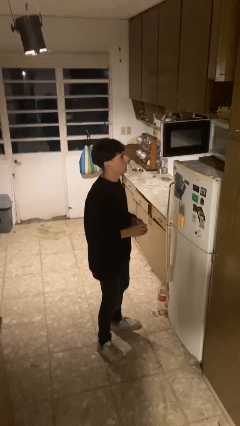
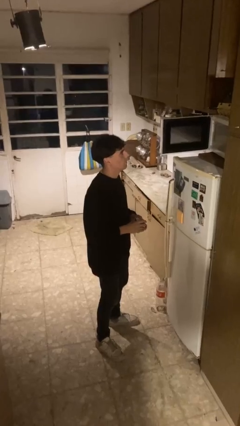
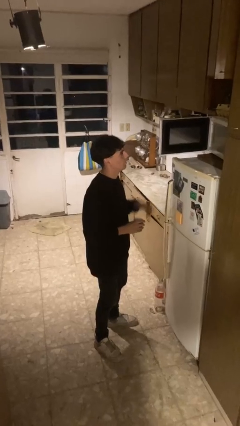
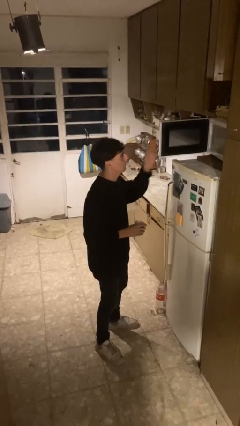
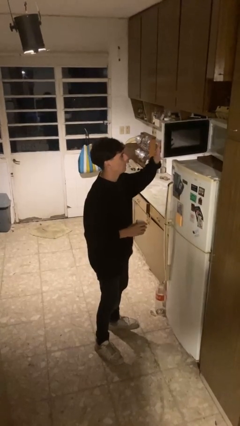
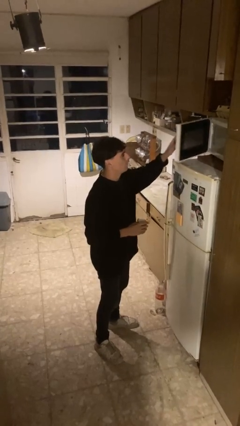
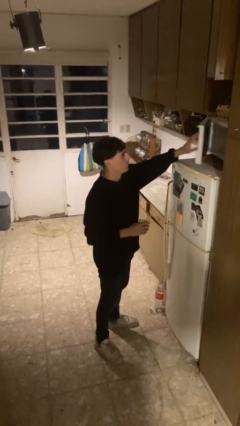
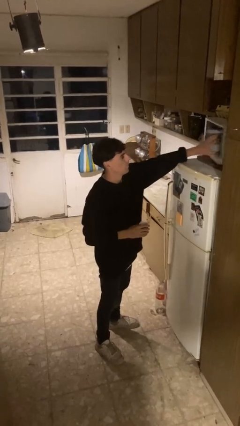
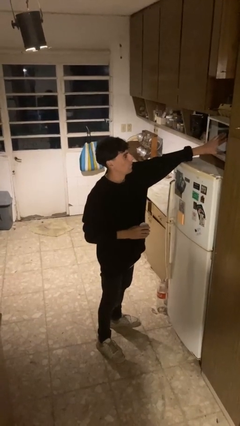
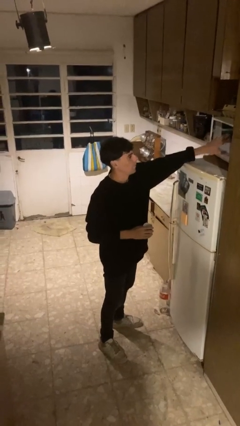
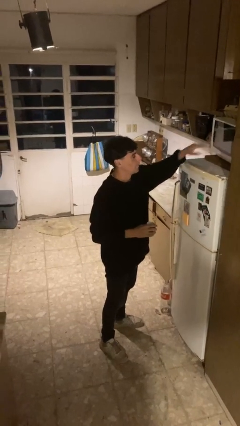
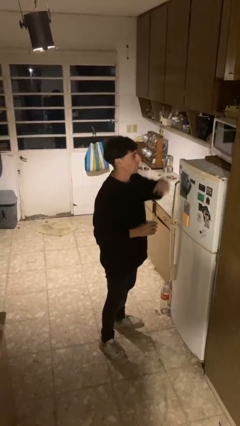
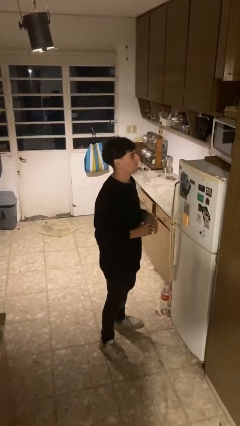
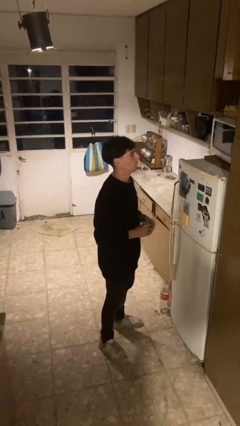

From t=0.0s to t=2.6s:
person closes microwave

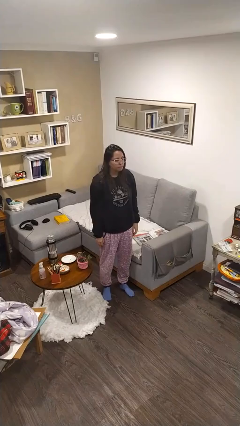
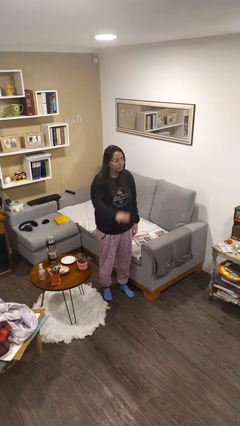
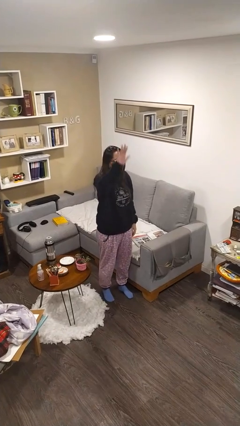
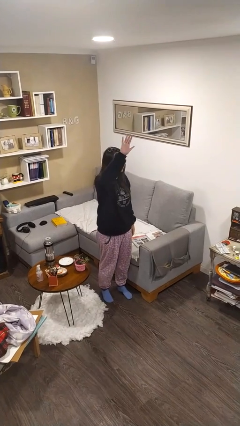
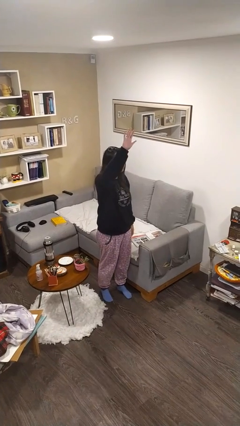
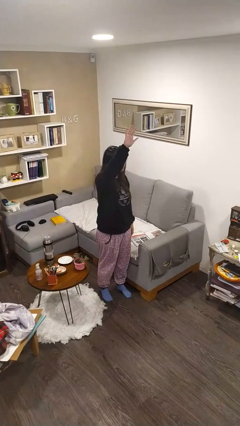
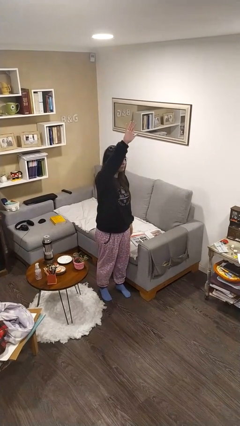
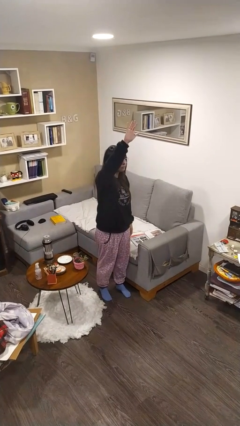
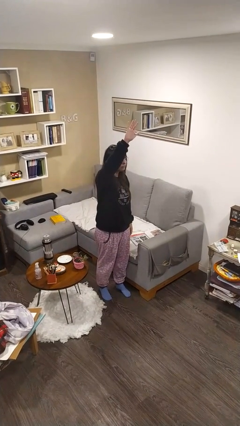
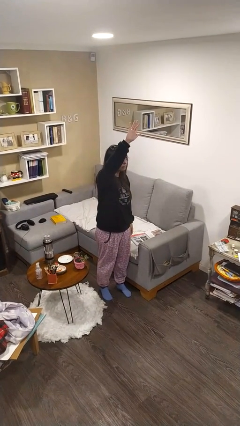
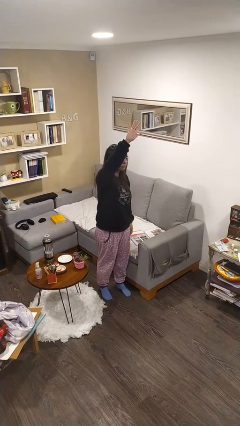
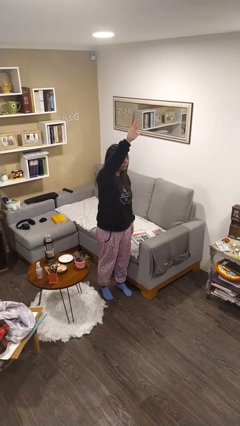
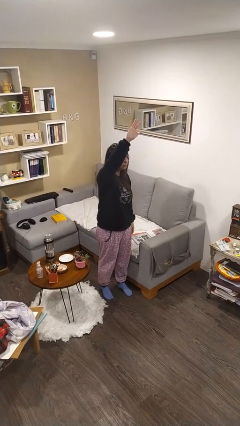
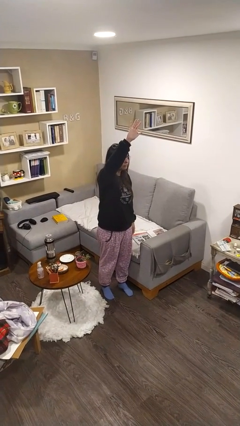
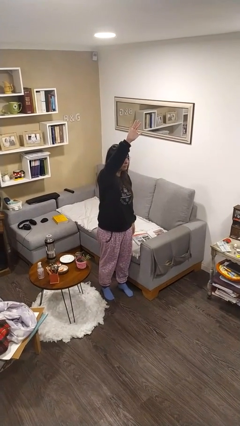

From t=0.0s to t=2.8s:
person gestures raise hand

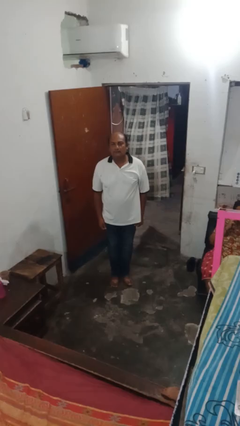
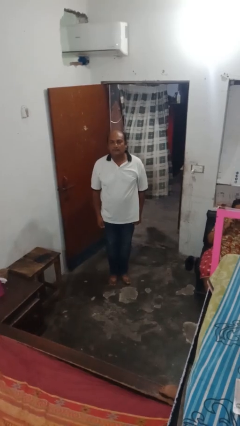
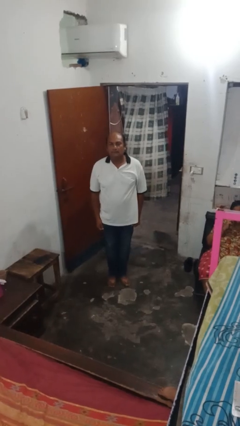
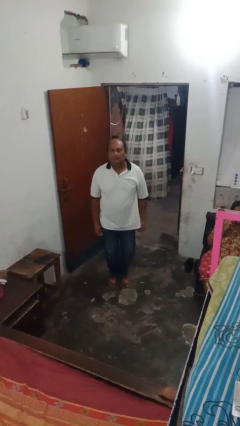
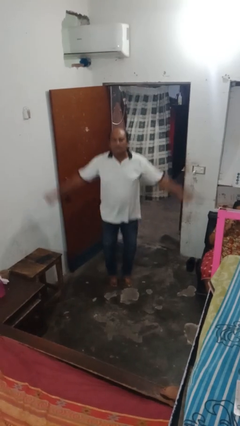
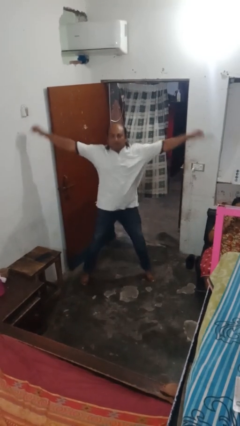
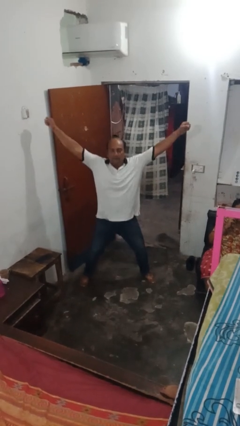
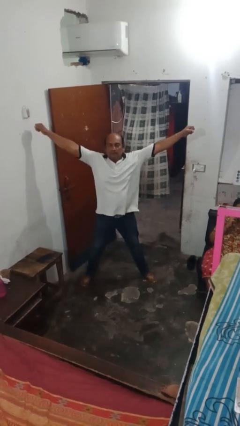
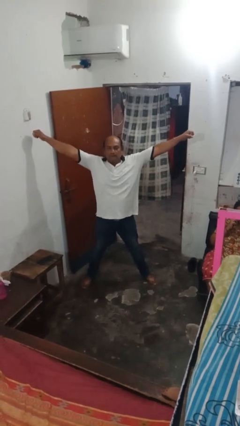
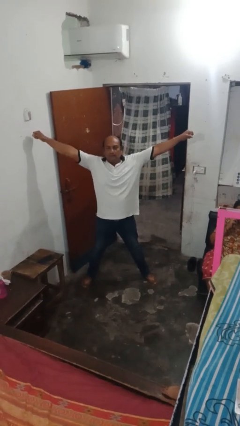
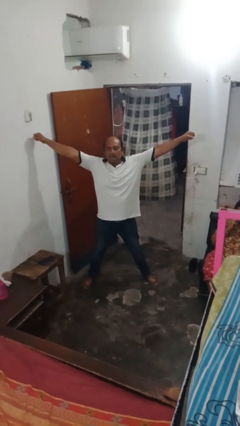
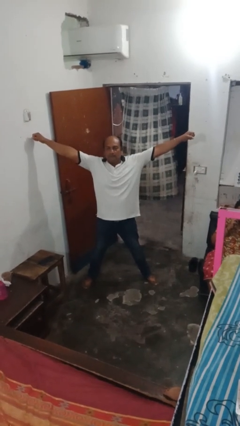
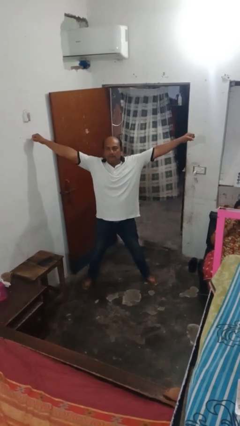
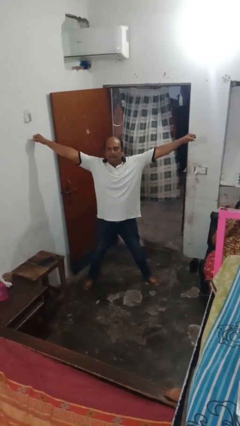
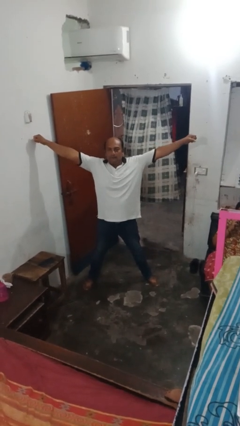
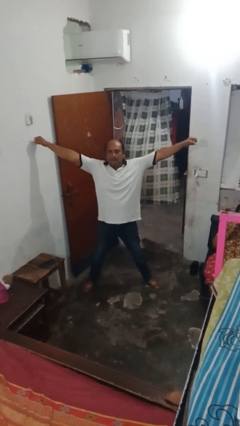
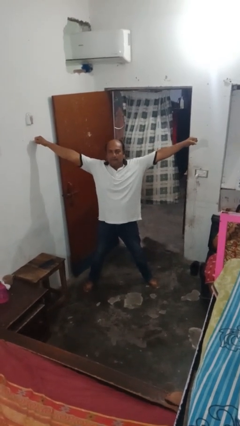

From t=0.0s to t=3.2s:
person exercises with jumping jacks

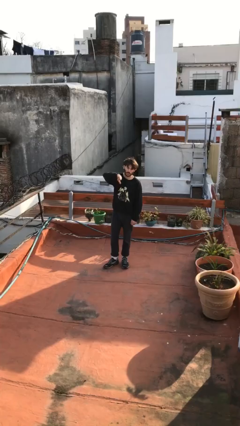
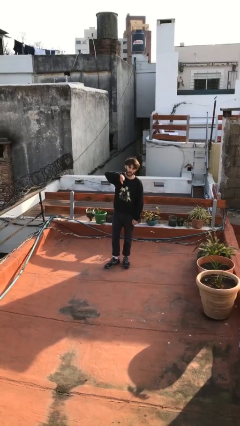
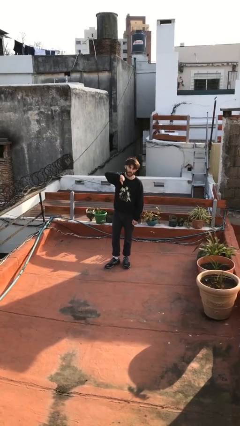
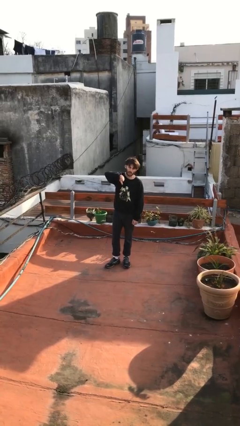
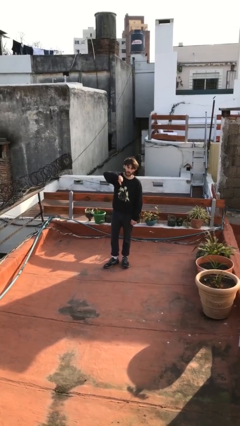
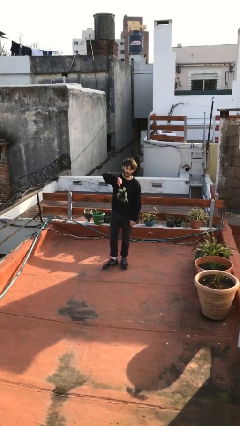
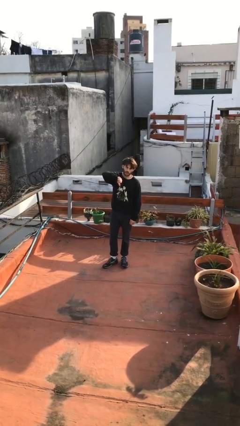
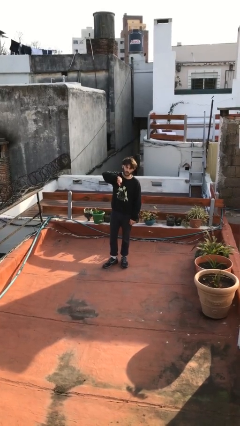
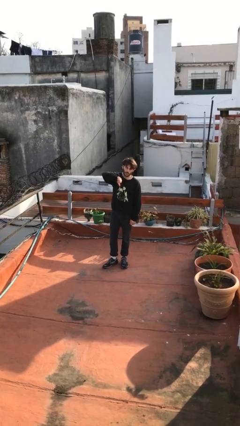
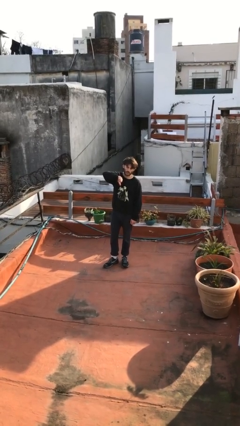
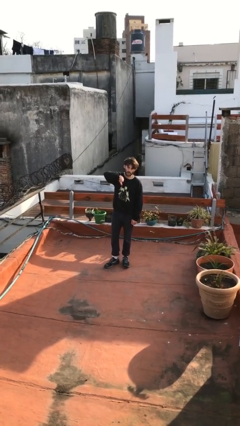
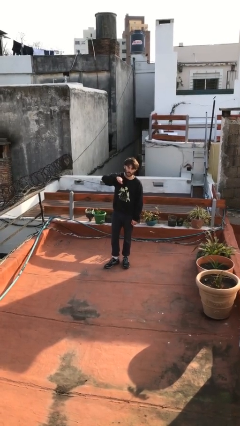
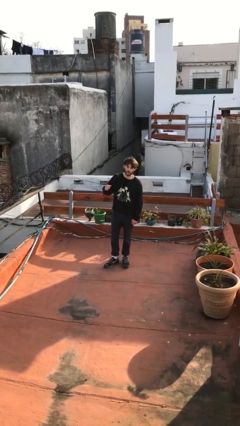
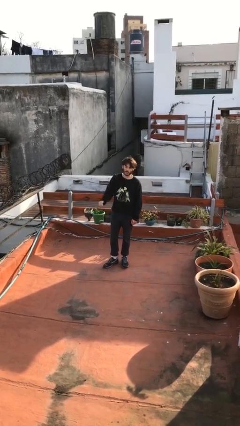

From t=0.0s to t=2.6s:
person gestures thumbs down

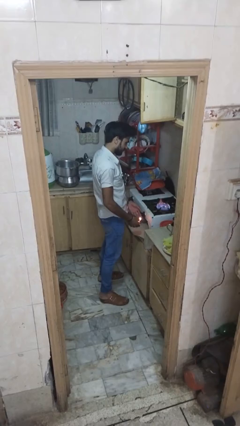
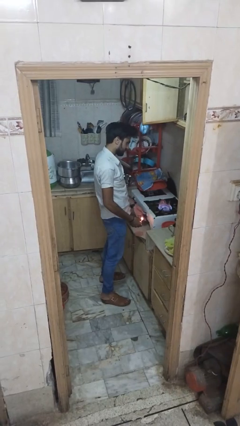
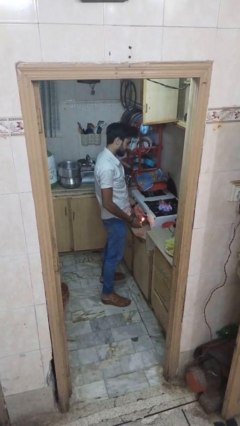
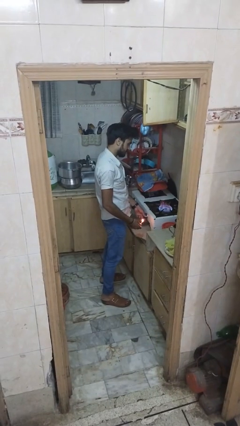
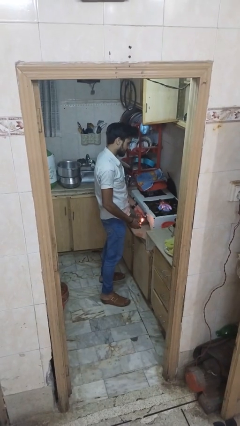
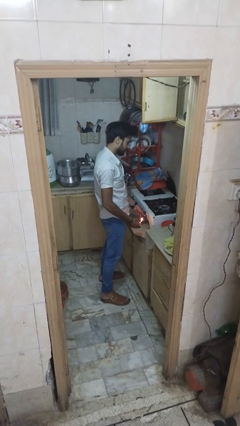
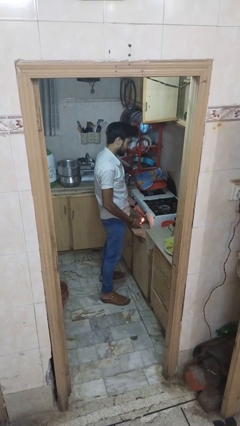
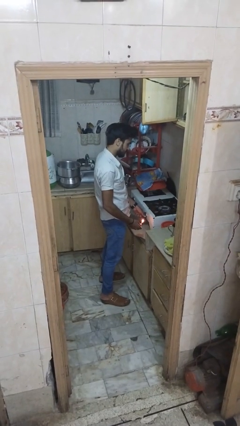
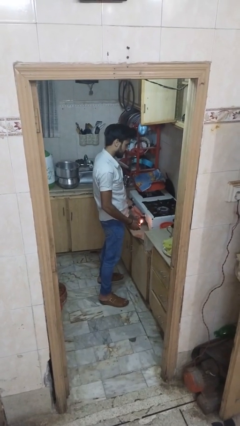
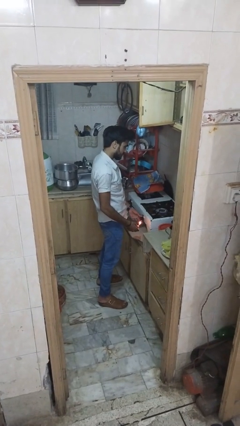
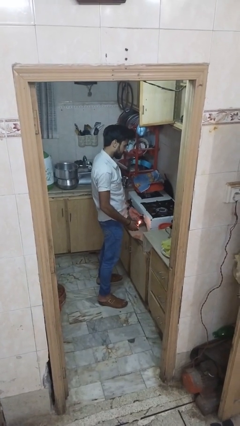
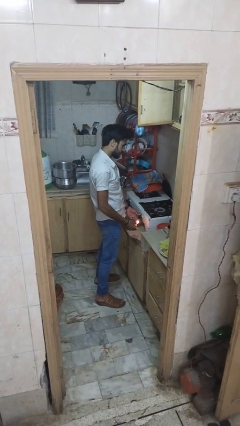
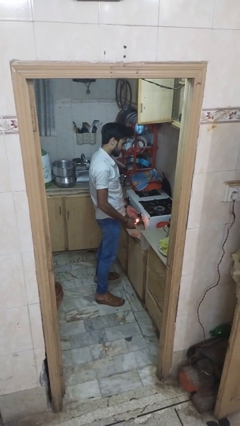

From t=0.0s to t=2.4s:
person turns off stovetop

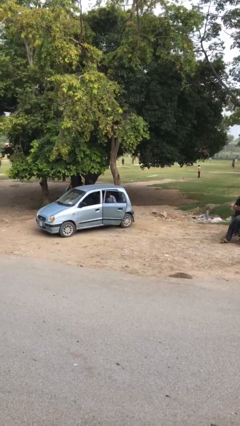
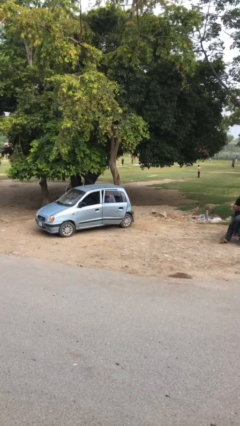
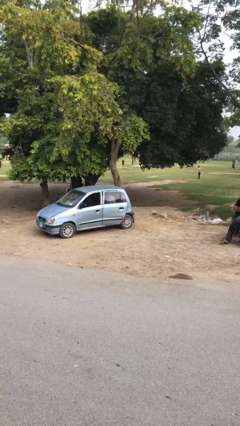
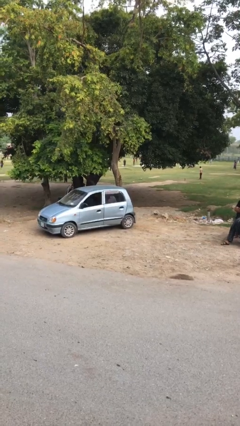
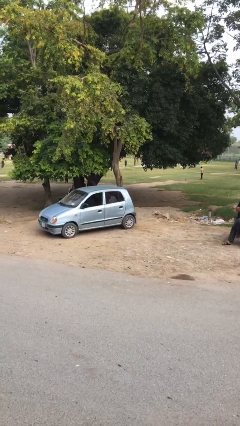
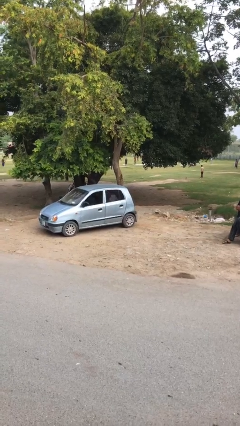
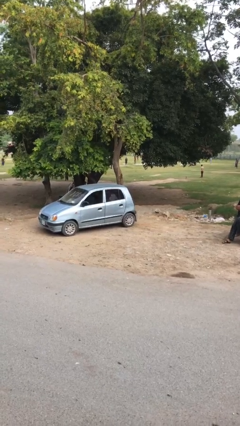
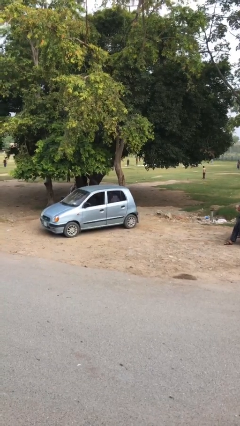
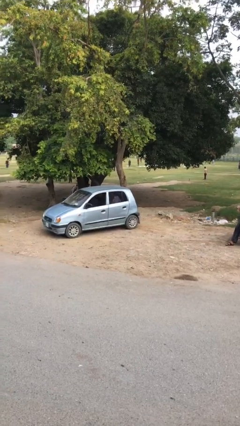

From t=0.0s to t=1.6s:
person closes car door

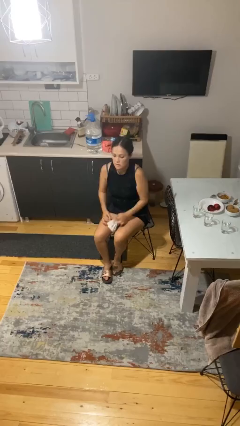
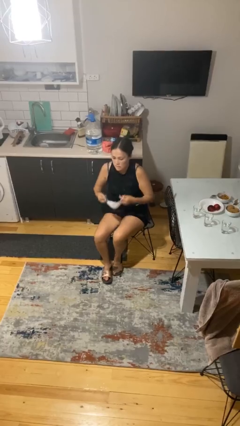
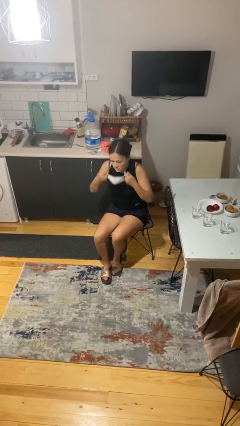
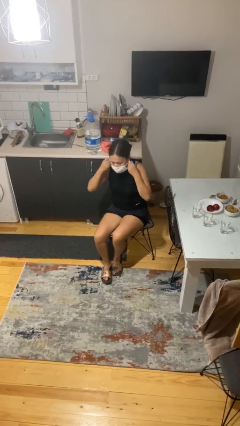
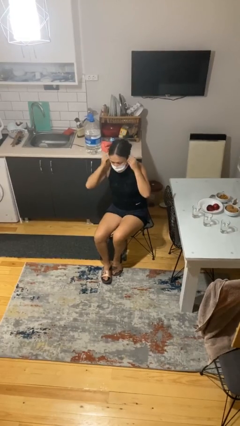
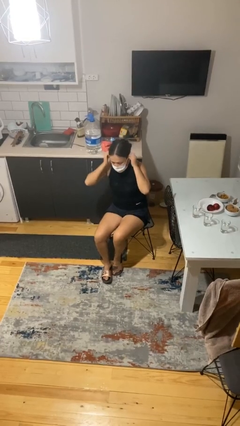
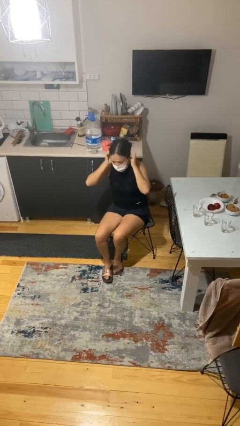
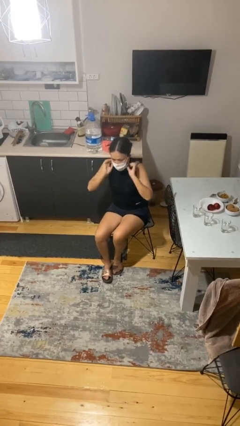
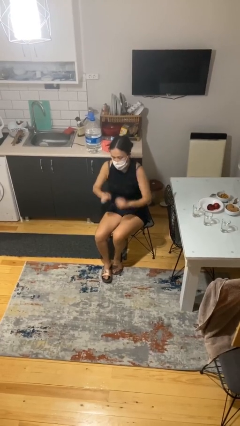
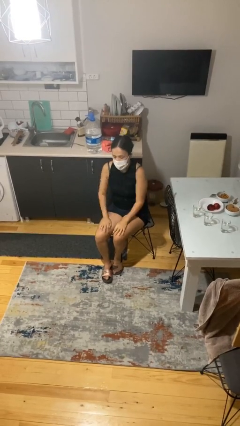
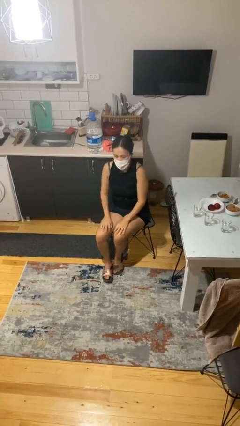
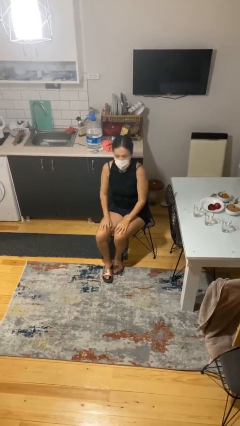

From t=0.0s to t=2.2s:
person puts on facemask
